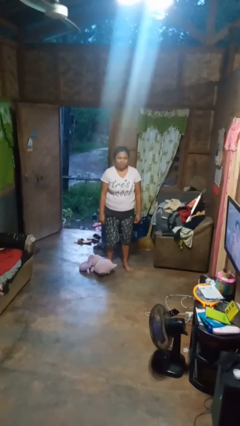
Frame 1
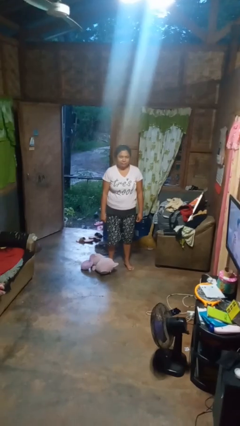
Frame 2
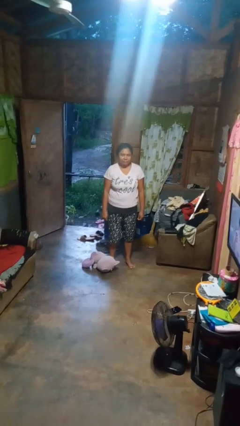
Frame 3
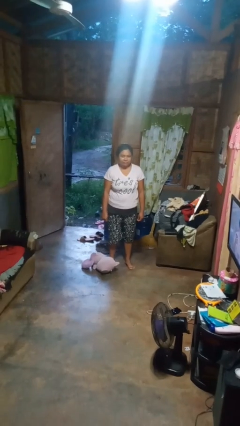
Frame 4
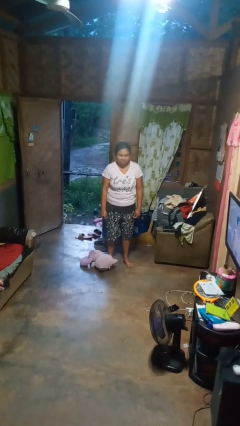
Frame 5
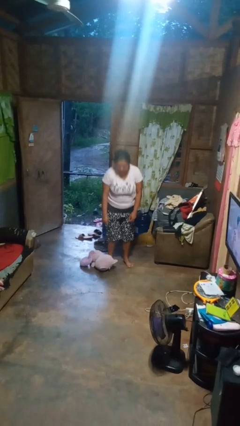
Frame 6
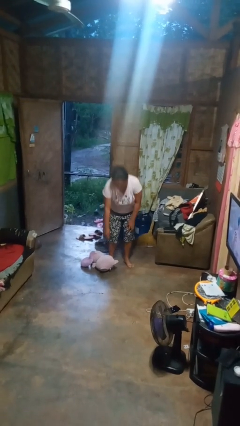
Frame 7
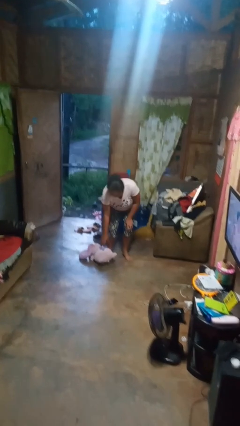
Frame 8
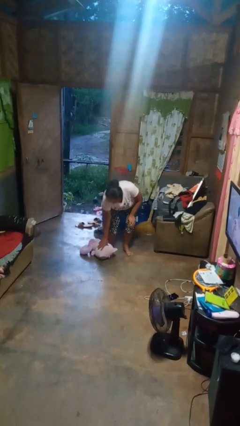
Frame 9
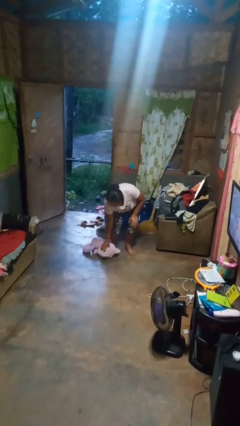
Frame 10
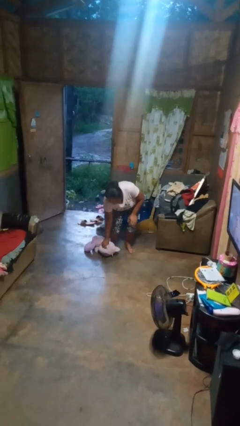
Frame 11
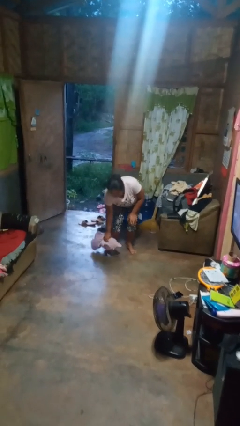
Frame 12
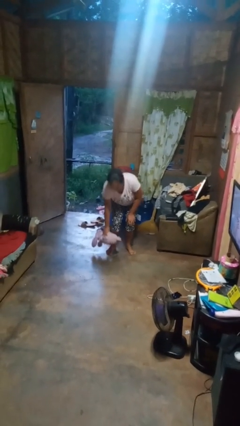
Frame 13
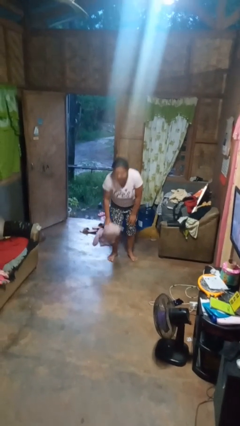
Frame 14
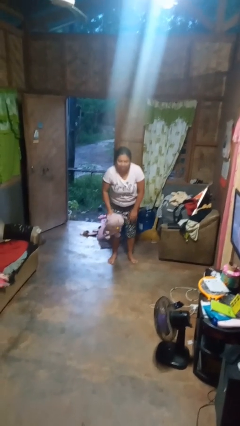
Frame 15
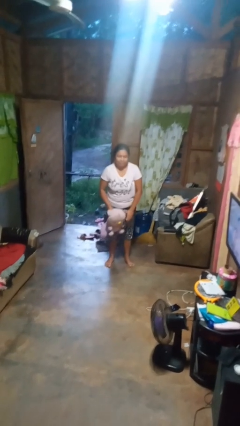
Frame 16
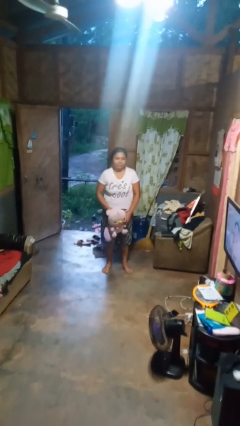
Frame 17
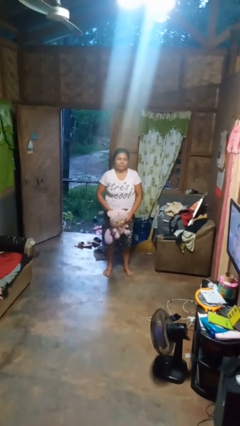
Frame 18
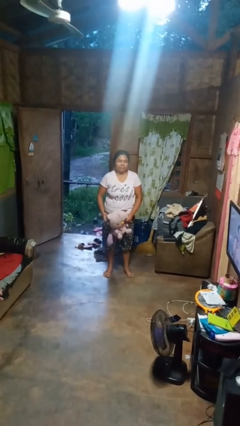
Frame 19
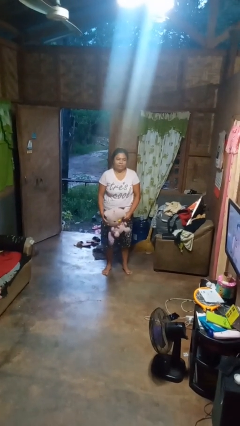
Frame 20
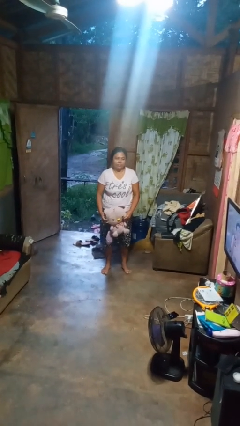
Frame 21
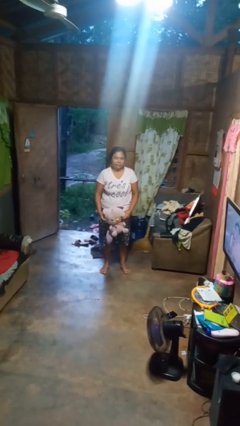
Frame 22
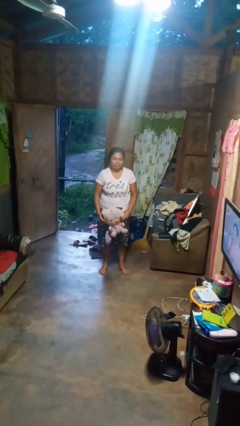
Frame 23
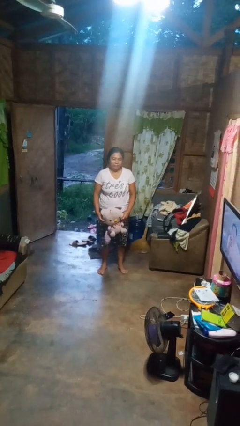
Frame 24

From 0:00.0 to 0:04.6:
person picks up object from floor

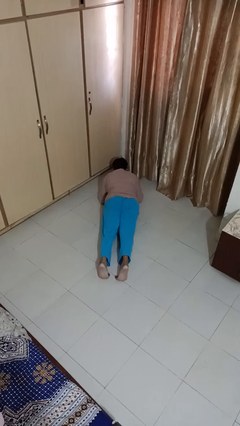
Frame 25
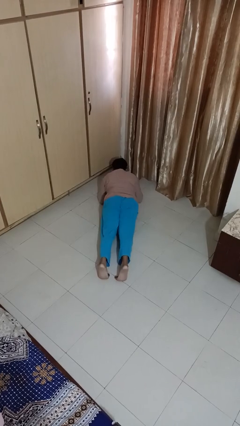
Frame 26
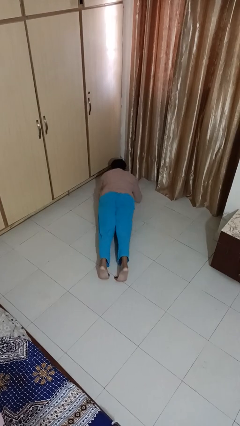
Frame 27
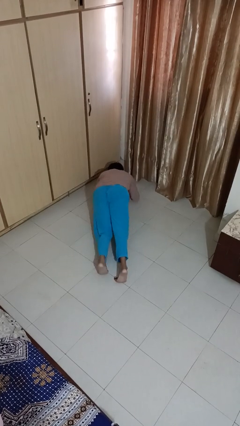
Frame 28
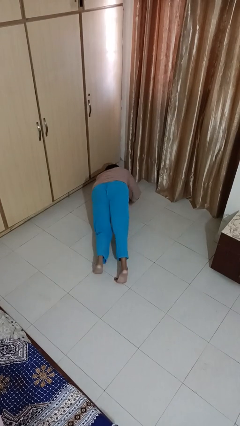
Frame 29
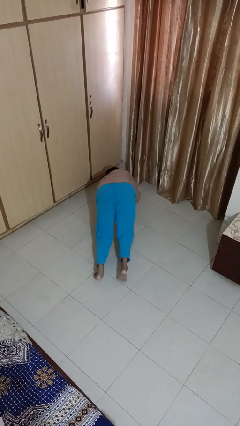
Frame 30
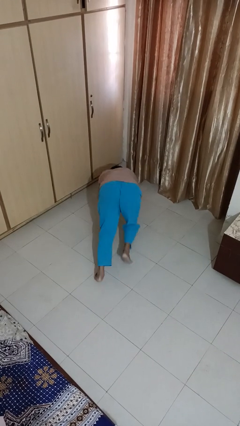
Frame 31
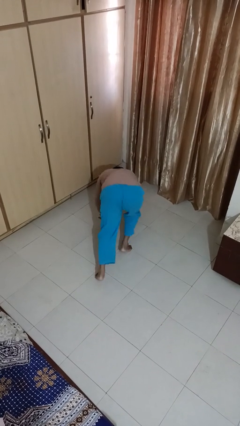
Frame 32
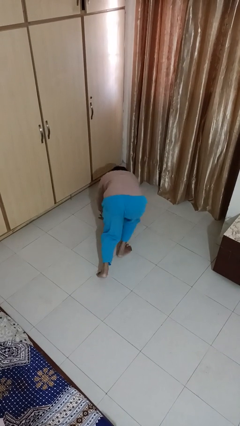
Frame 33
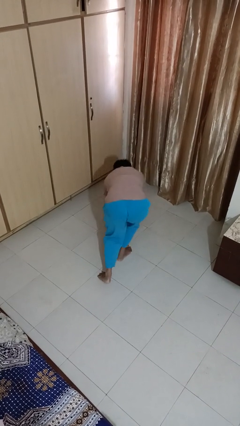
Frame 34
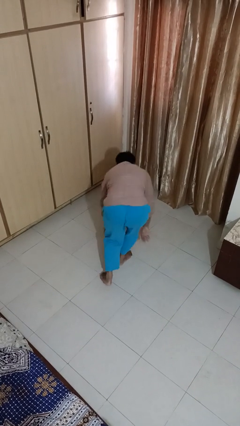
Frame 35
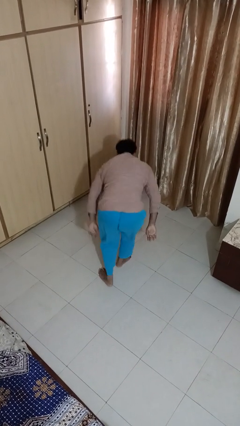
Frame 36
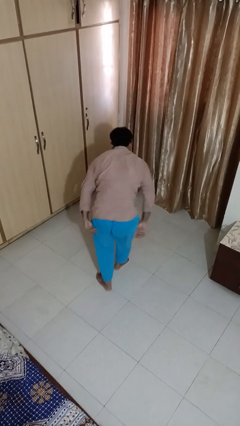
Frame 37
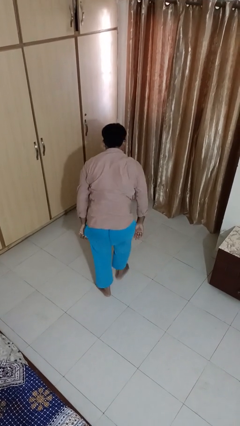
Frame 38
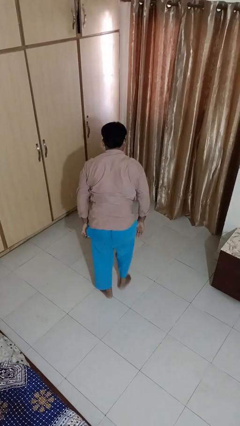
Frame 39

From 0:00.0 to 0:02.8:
person stands up from floor

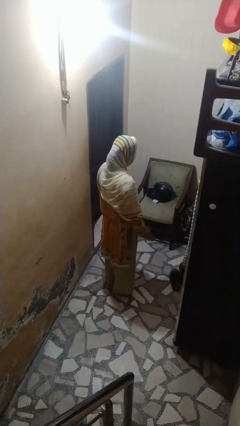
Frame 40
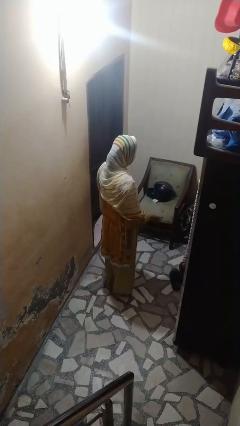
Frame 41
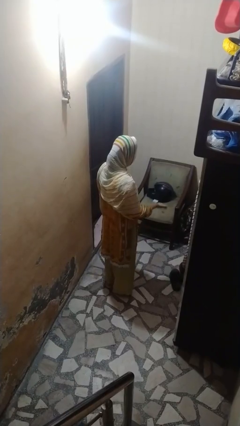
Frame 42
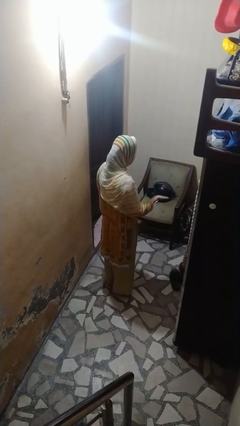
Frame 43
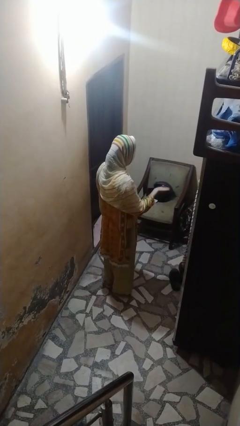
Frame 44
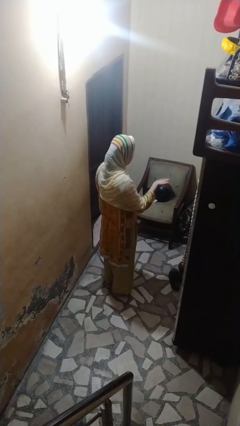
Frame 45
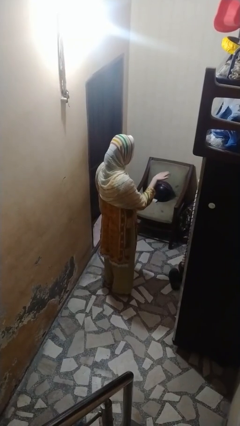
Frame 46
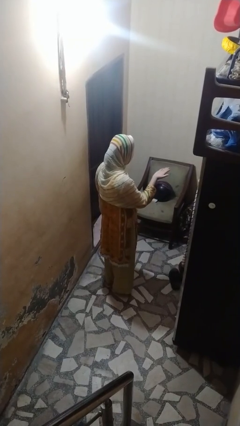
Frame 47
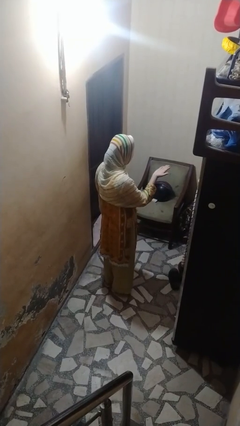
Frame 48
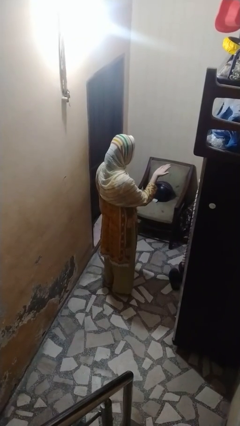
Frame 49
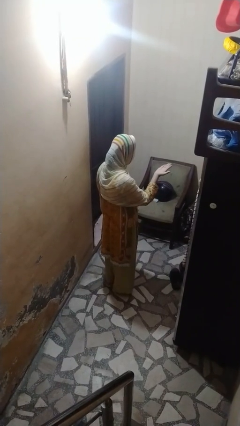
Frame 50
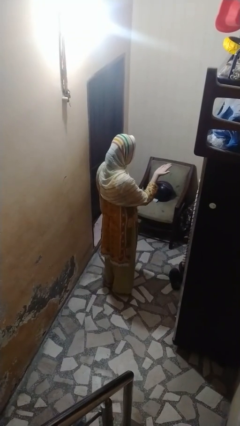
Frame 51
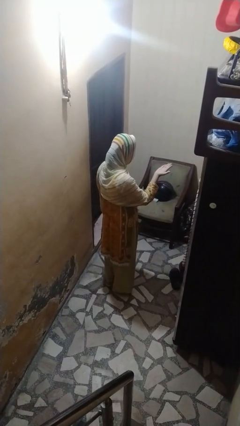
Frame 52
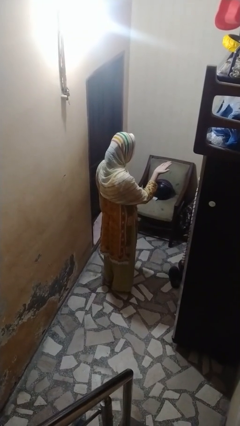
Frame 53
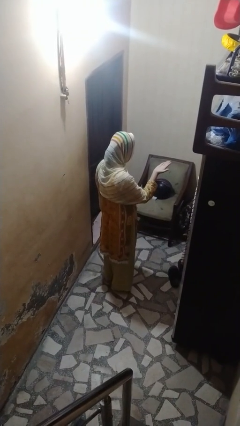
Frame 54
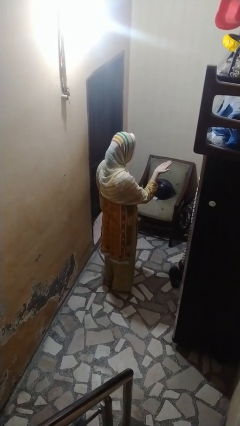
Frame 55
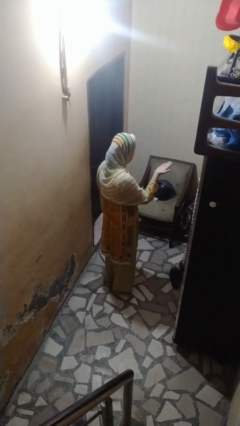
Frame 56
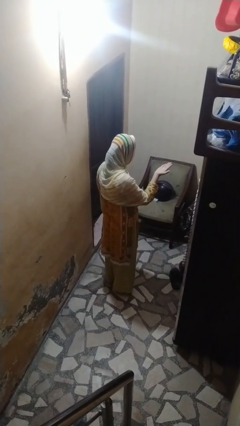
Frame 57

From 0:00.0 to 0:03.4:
person gestures swipe up

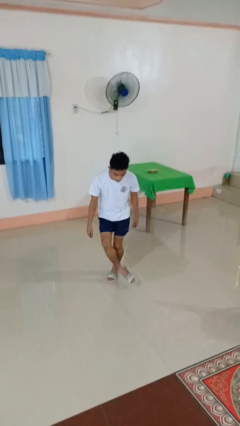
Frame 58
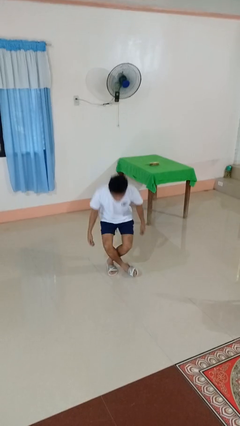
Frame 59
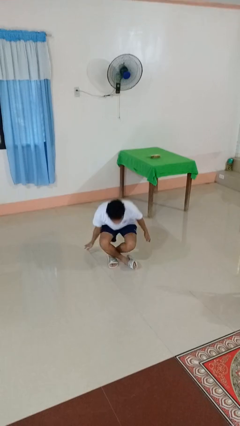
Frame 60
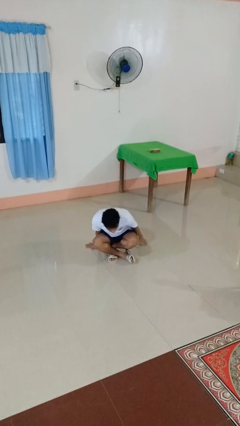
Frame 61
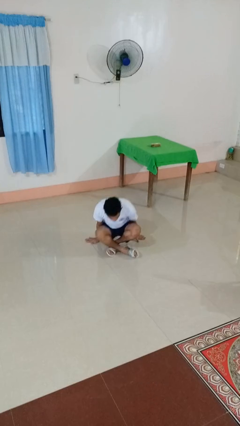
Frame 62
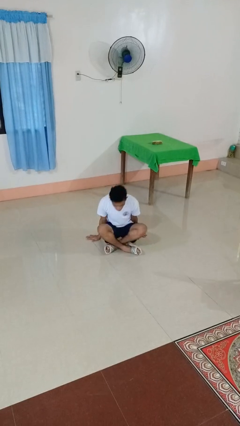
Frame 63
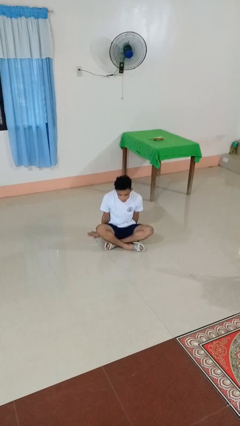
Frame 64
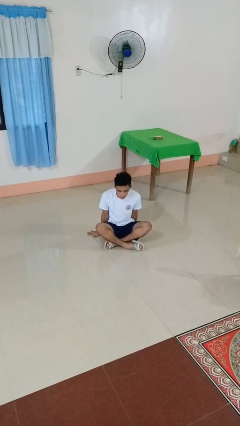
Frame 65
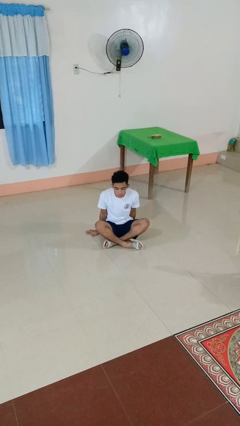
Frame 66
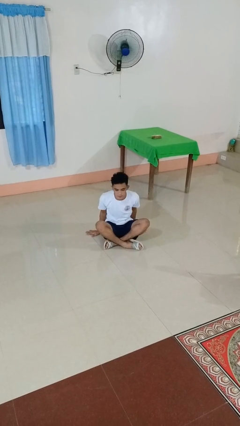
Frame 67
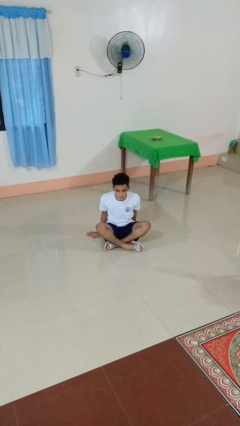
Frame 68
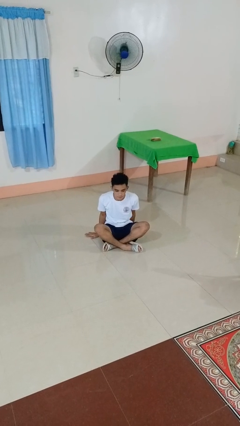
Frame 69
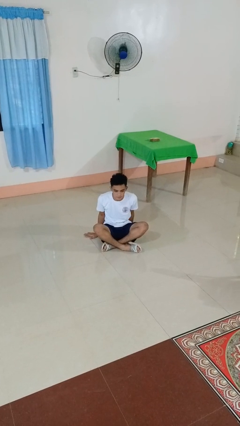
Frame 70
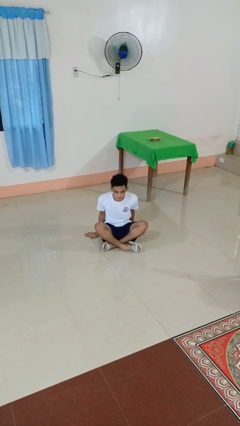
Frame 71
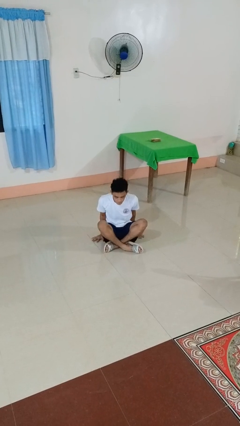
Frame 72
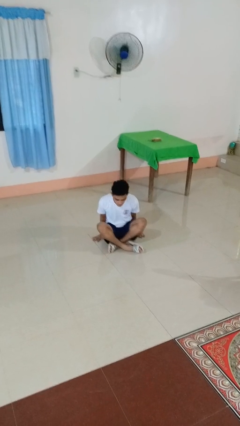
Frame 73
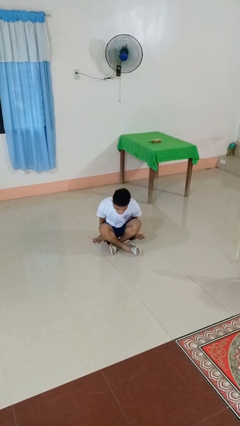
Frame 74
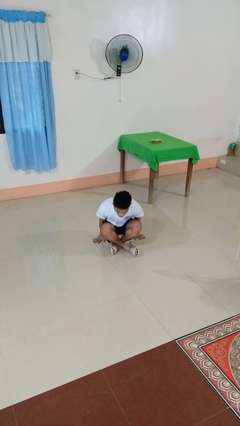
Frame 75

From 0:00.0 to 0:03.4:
person sits crisscross

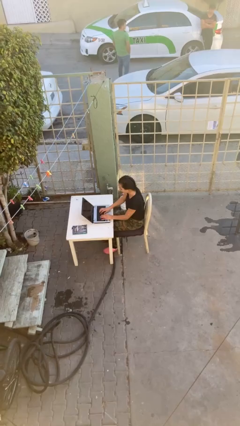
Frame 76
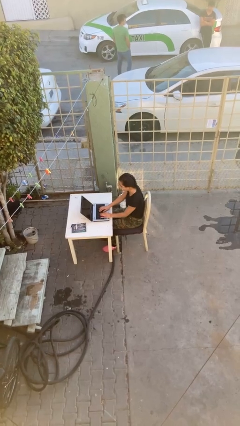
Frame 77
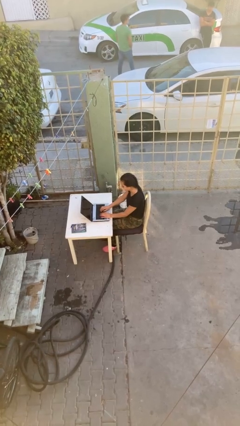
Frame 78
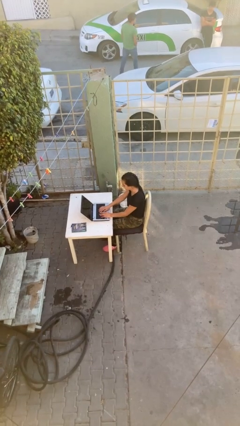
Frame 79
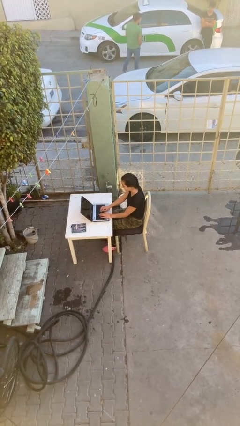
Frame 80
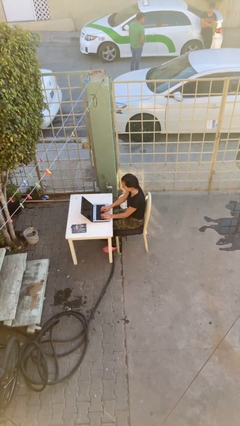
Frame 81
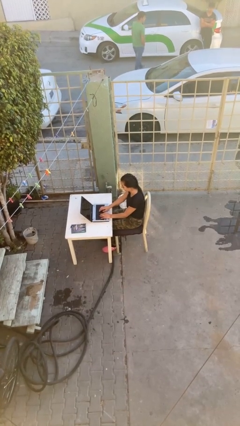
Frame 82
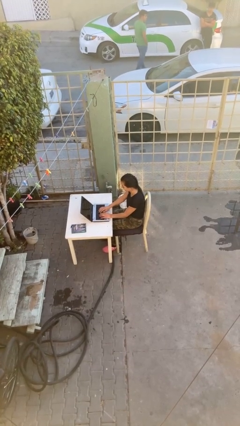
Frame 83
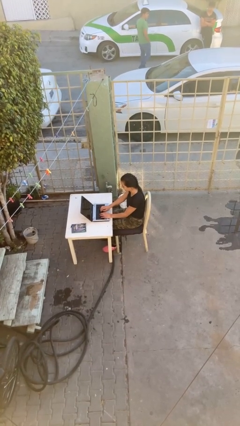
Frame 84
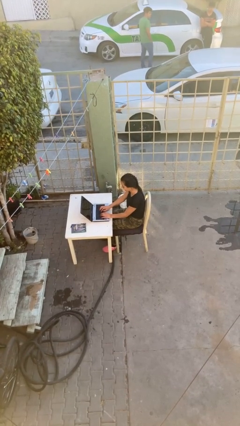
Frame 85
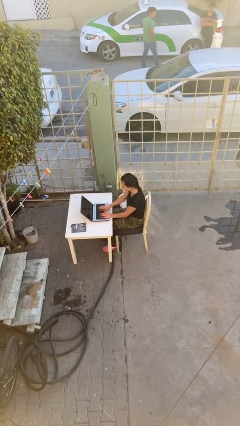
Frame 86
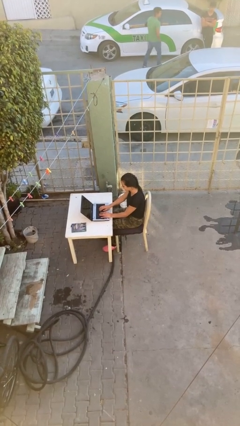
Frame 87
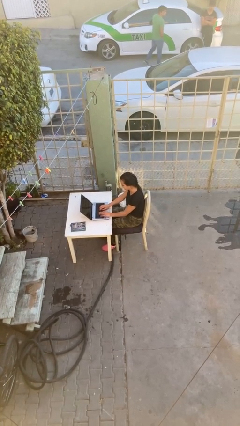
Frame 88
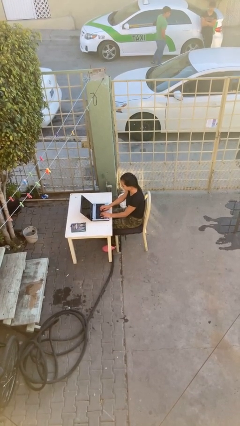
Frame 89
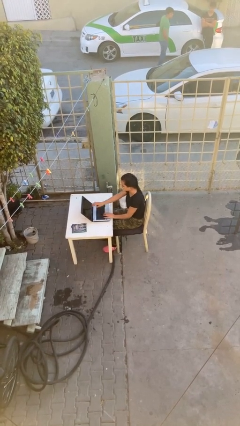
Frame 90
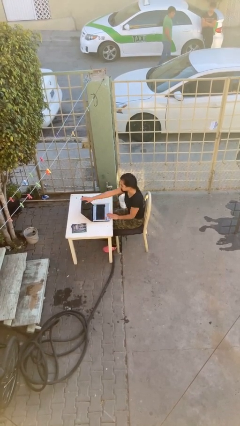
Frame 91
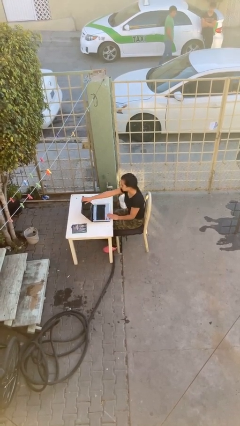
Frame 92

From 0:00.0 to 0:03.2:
person interacts with laptop

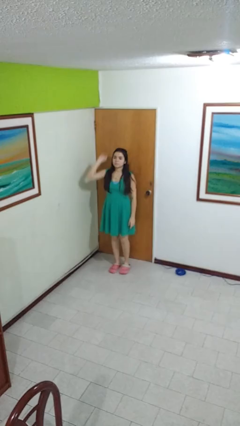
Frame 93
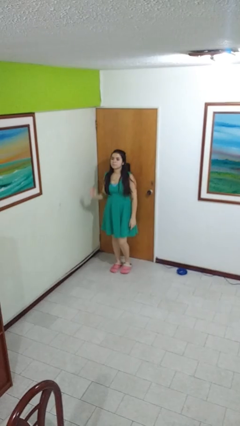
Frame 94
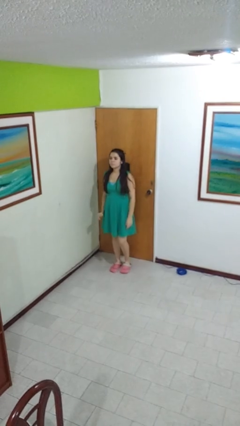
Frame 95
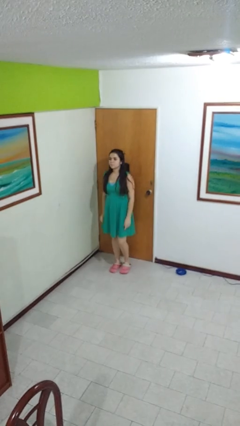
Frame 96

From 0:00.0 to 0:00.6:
person gestures lower hand
